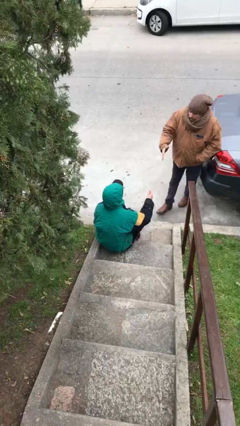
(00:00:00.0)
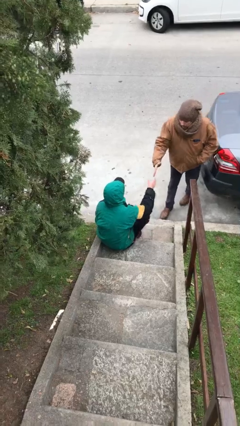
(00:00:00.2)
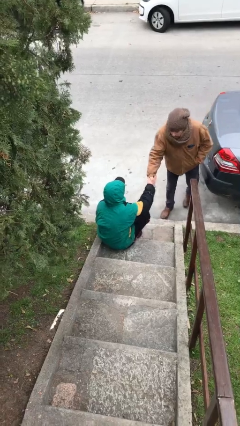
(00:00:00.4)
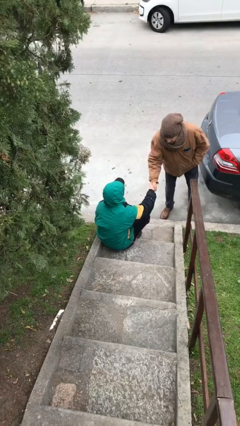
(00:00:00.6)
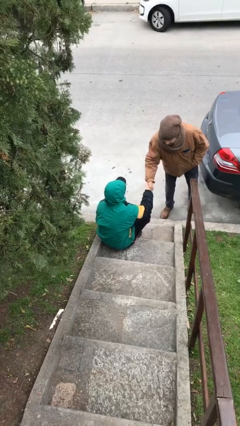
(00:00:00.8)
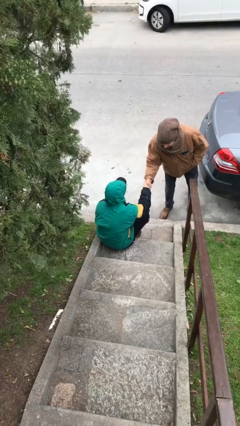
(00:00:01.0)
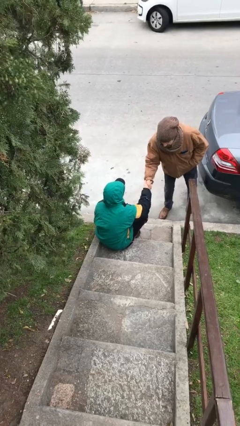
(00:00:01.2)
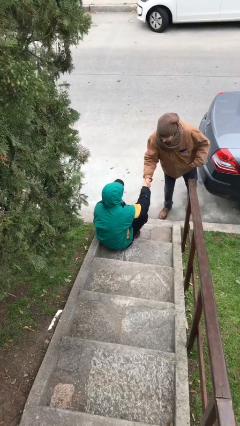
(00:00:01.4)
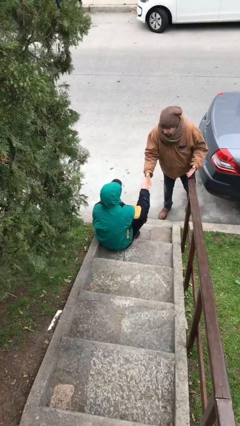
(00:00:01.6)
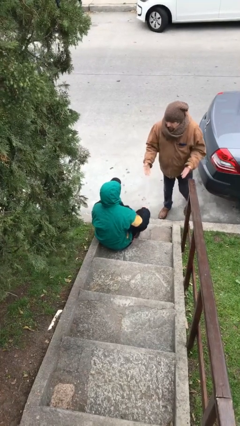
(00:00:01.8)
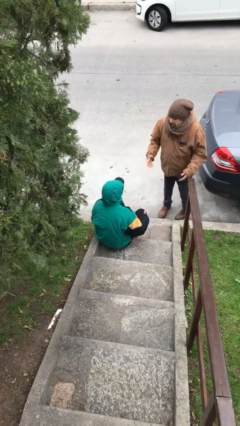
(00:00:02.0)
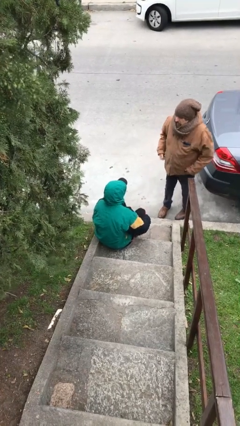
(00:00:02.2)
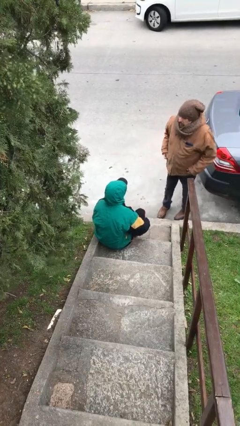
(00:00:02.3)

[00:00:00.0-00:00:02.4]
person shakes hand

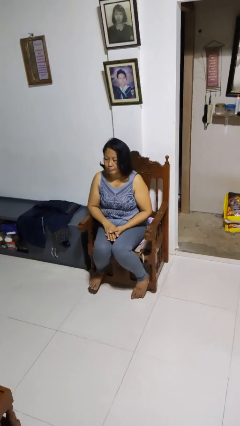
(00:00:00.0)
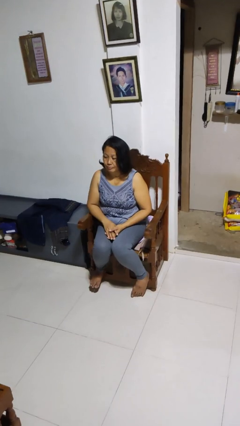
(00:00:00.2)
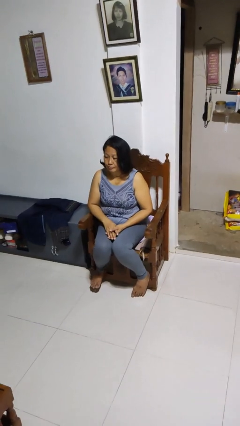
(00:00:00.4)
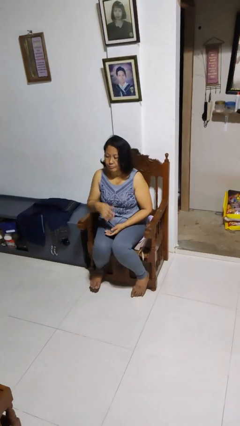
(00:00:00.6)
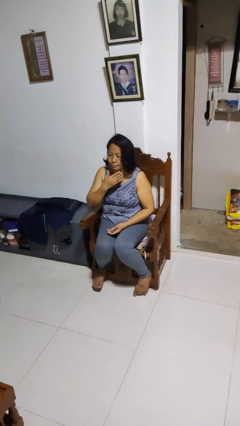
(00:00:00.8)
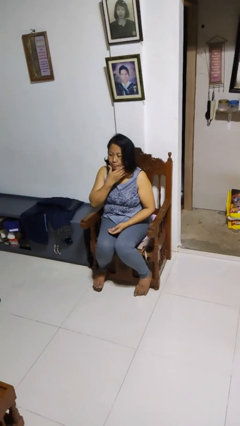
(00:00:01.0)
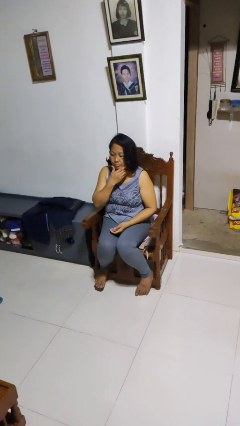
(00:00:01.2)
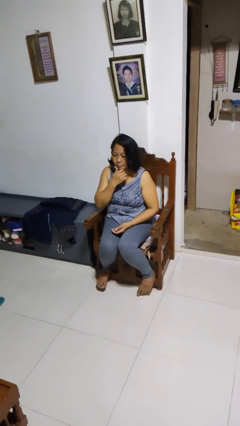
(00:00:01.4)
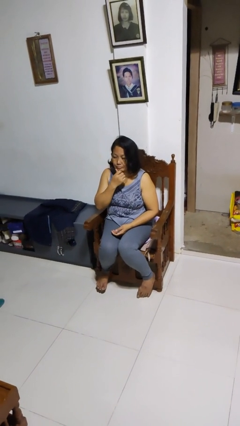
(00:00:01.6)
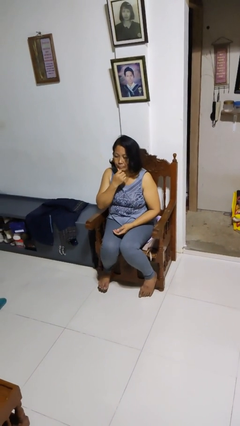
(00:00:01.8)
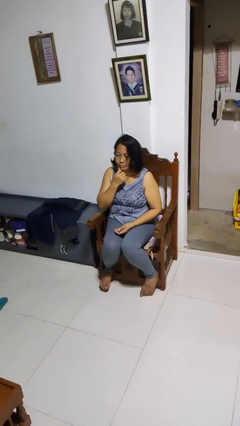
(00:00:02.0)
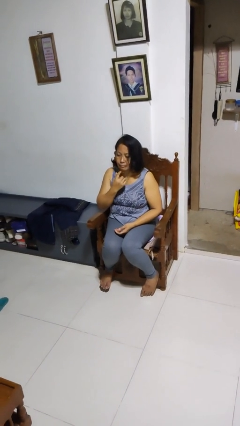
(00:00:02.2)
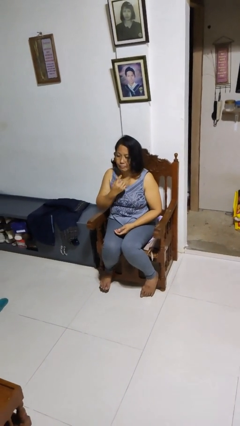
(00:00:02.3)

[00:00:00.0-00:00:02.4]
person strokes chin

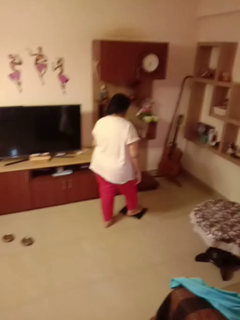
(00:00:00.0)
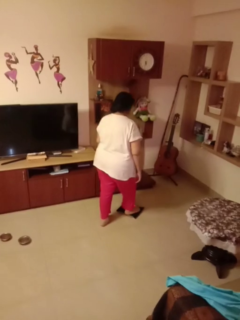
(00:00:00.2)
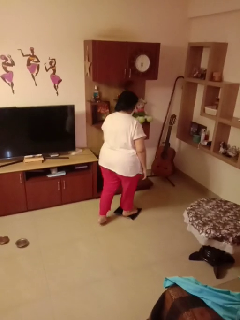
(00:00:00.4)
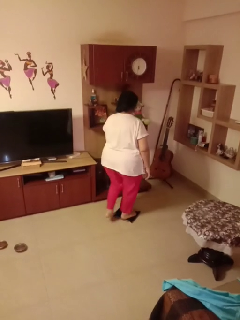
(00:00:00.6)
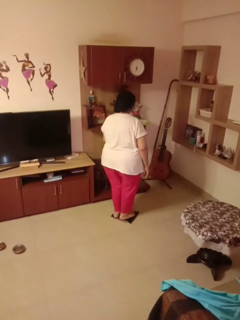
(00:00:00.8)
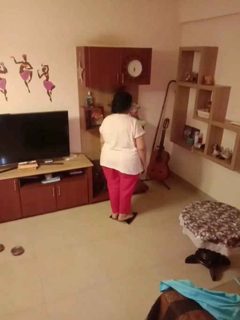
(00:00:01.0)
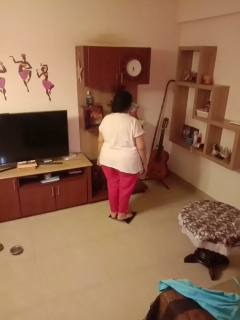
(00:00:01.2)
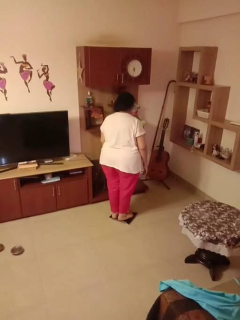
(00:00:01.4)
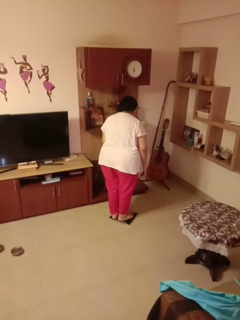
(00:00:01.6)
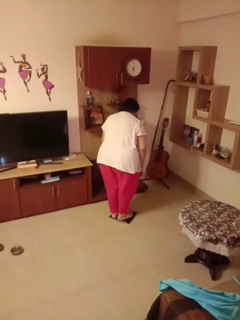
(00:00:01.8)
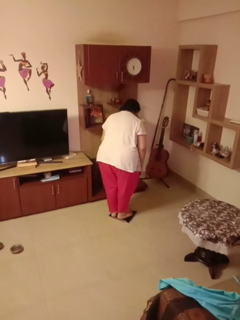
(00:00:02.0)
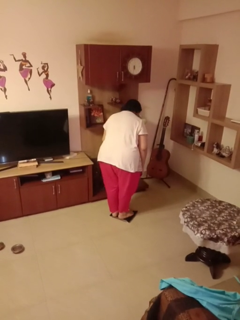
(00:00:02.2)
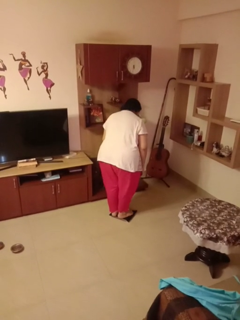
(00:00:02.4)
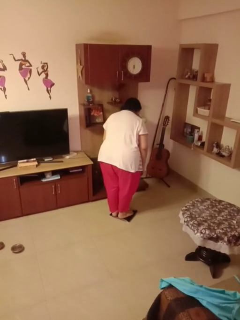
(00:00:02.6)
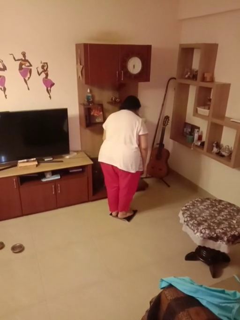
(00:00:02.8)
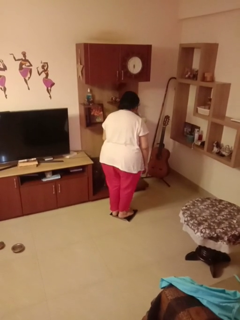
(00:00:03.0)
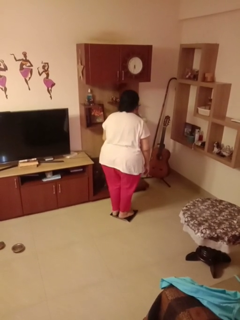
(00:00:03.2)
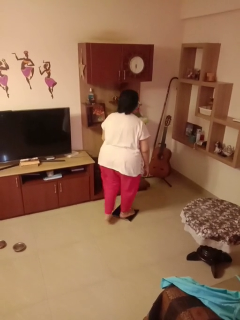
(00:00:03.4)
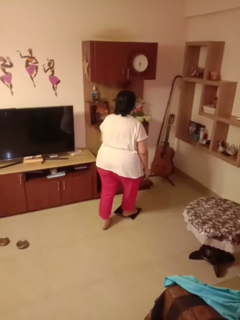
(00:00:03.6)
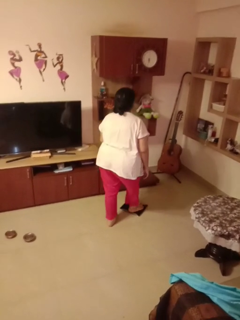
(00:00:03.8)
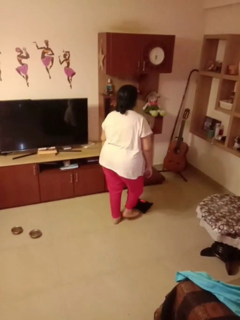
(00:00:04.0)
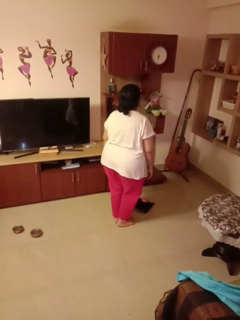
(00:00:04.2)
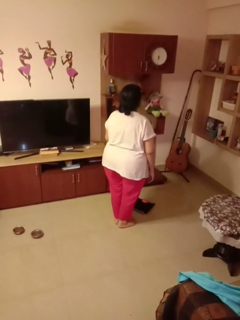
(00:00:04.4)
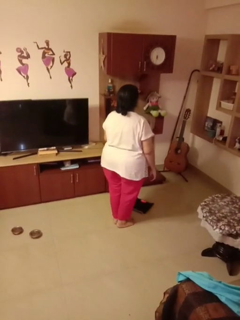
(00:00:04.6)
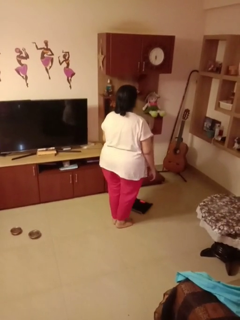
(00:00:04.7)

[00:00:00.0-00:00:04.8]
person uses bodyweight scale

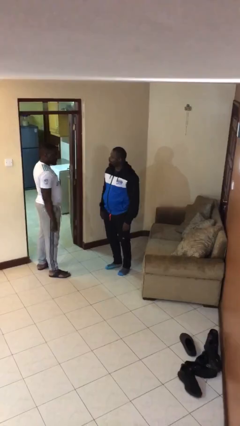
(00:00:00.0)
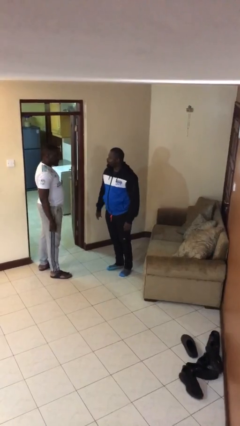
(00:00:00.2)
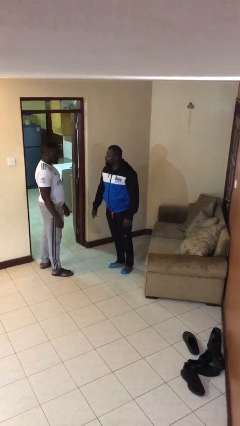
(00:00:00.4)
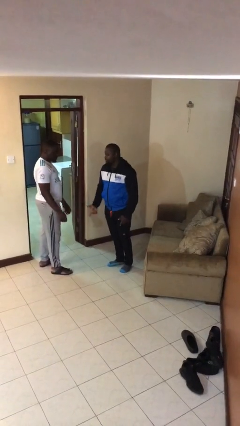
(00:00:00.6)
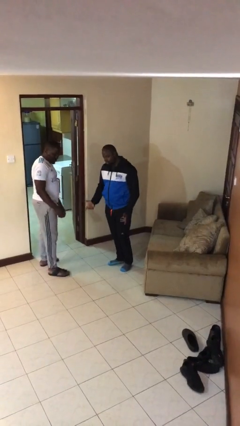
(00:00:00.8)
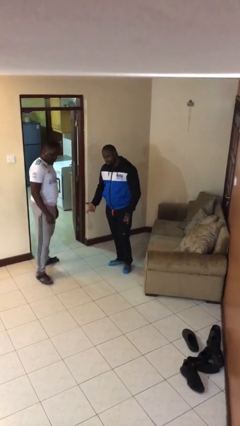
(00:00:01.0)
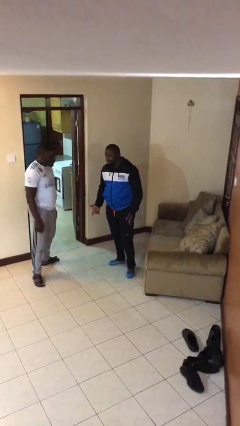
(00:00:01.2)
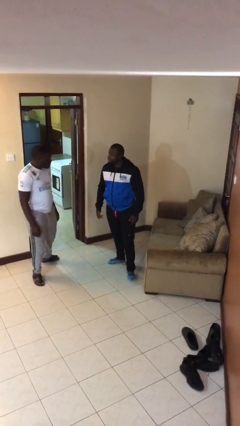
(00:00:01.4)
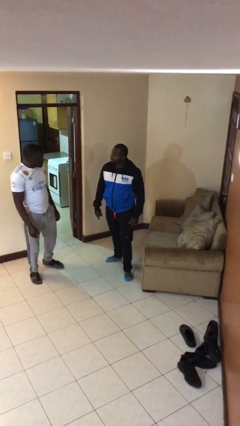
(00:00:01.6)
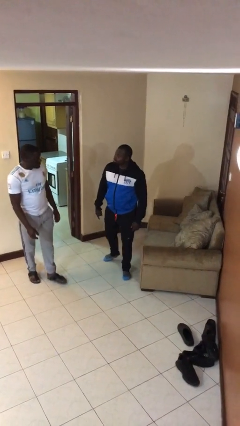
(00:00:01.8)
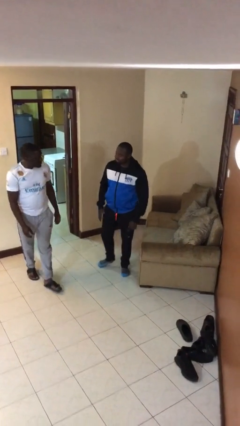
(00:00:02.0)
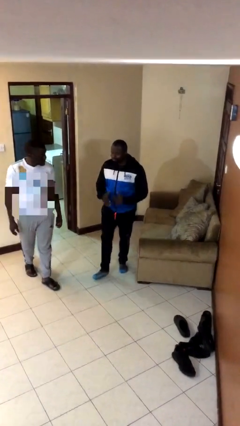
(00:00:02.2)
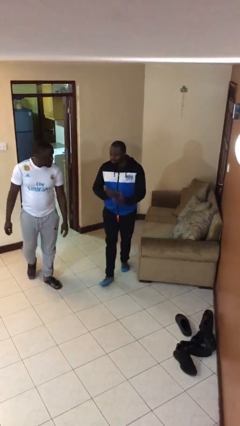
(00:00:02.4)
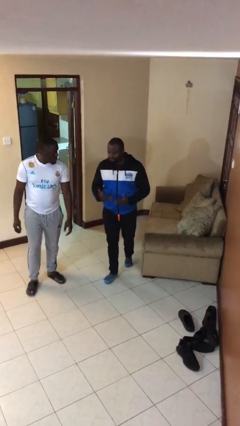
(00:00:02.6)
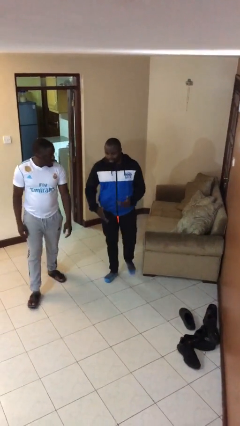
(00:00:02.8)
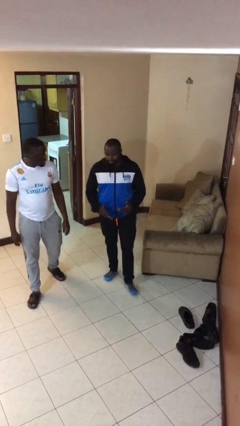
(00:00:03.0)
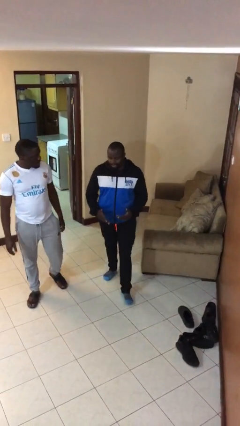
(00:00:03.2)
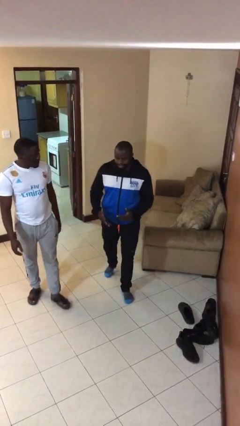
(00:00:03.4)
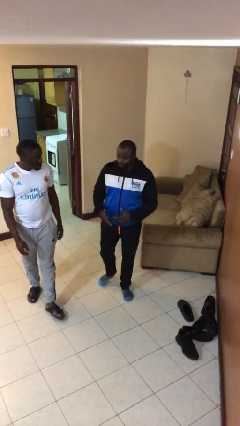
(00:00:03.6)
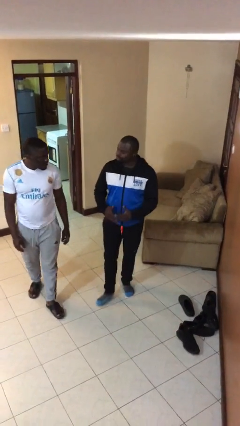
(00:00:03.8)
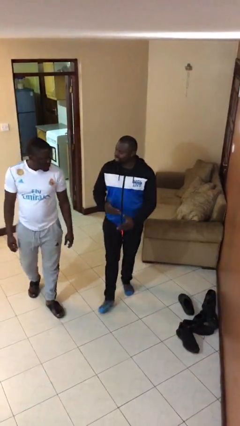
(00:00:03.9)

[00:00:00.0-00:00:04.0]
person talks to person

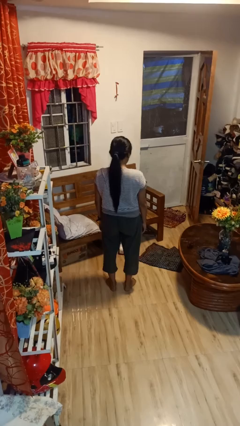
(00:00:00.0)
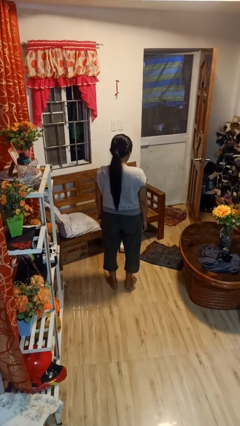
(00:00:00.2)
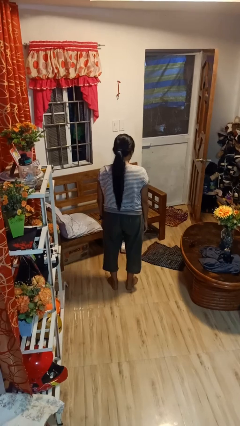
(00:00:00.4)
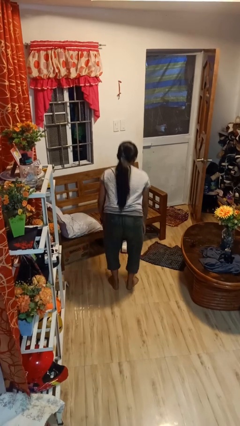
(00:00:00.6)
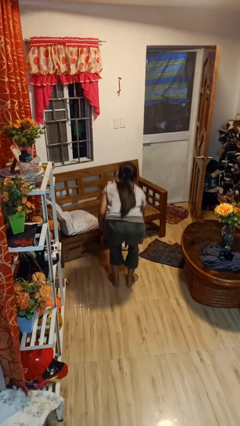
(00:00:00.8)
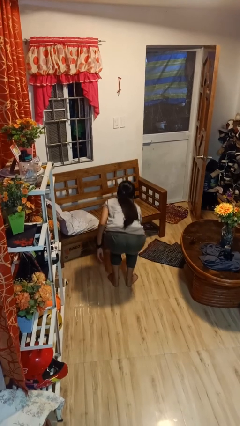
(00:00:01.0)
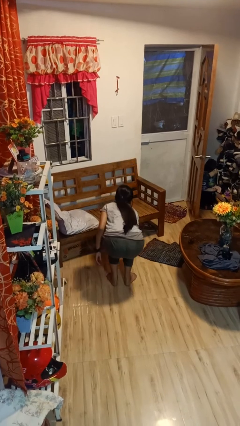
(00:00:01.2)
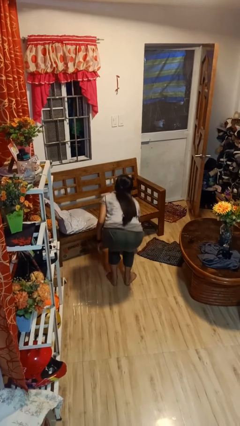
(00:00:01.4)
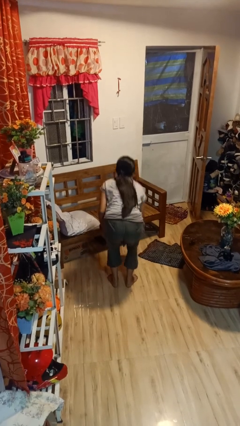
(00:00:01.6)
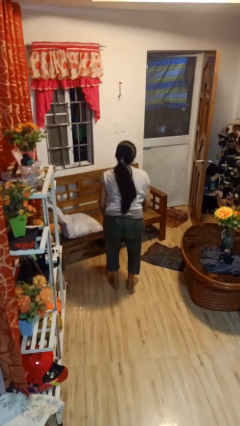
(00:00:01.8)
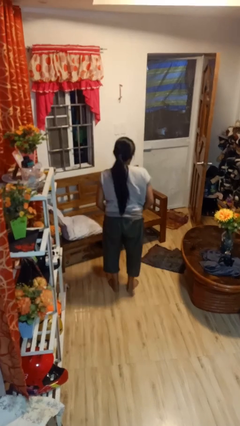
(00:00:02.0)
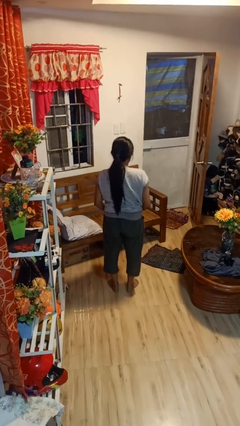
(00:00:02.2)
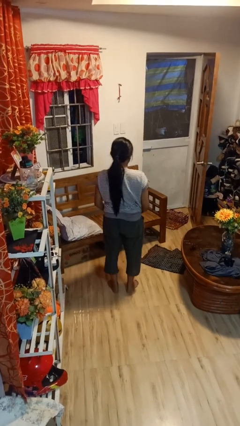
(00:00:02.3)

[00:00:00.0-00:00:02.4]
person picks up object from floor

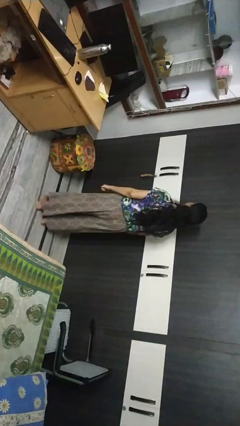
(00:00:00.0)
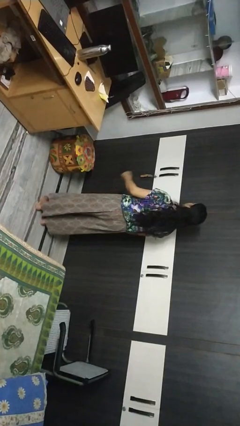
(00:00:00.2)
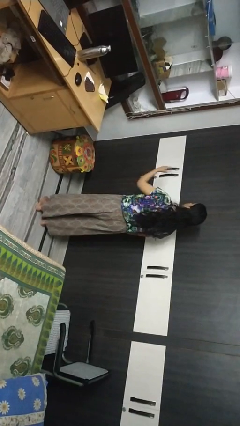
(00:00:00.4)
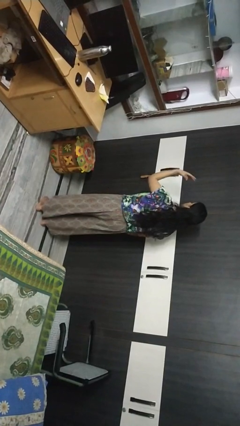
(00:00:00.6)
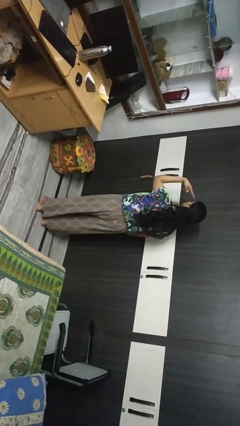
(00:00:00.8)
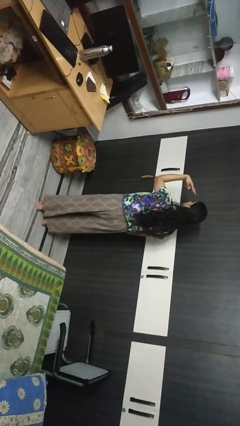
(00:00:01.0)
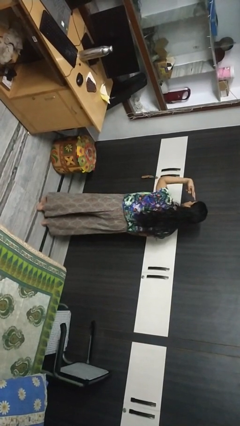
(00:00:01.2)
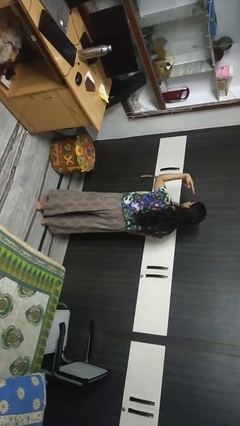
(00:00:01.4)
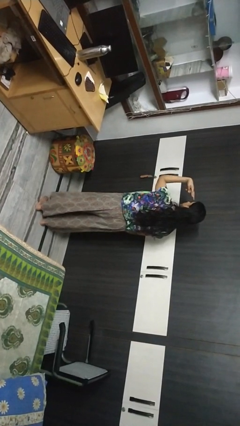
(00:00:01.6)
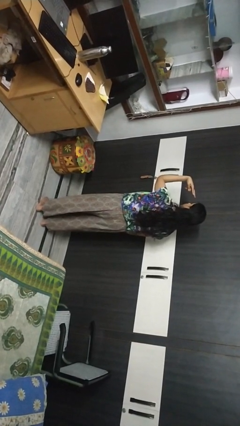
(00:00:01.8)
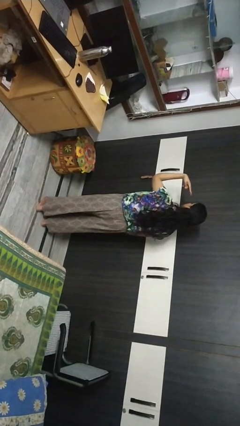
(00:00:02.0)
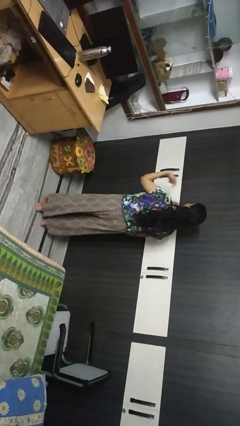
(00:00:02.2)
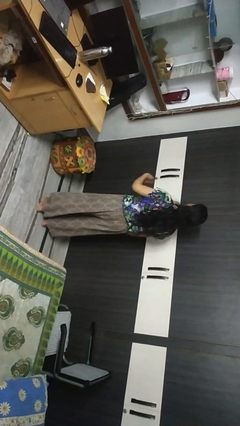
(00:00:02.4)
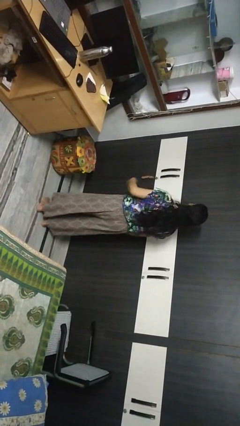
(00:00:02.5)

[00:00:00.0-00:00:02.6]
person gestures watch closely
